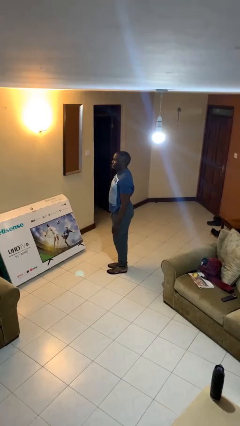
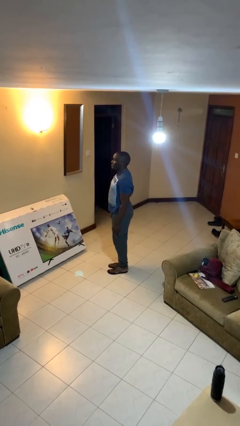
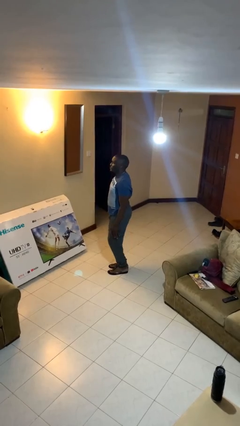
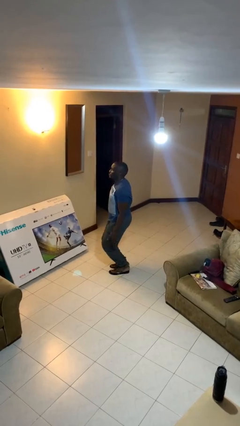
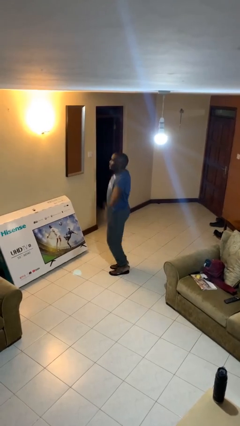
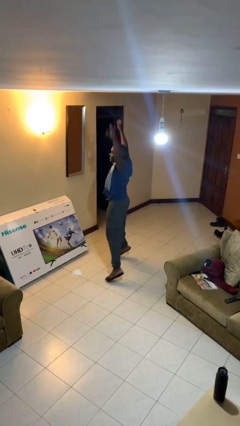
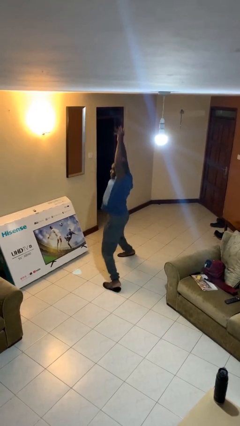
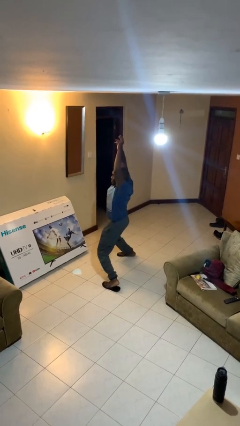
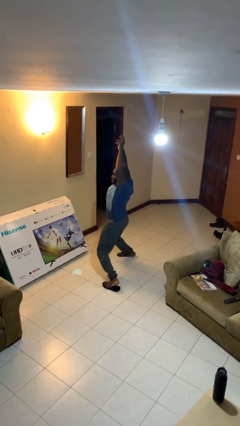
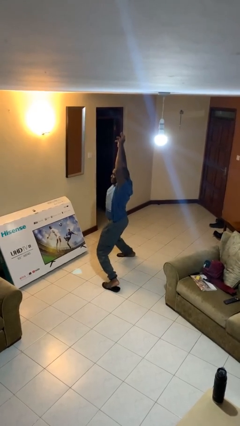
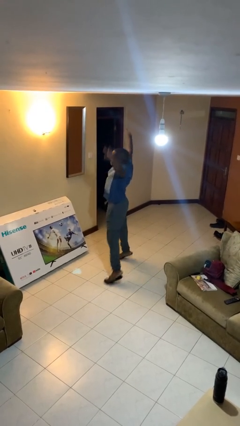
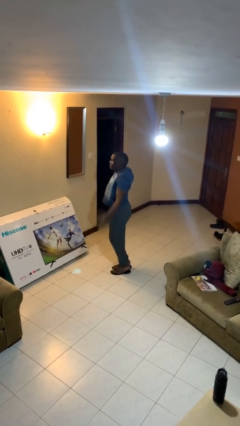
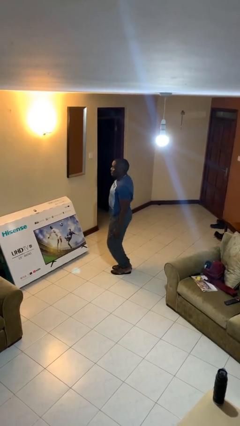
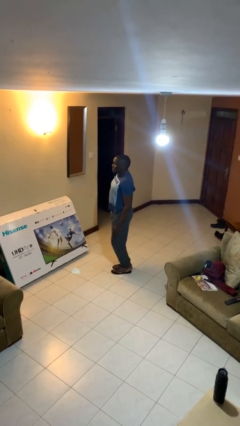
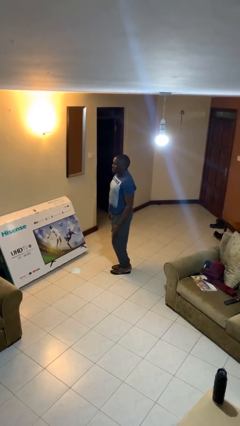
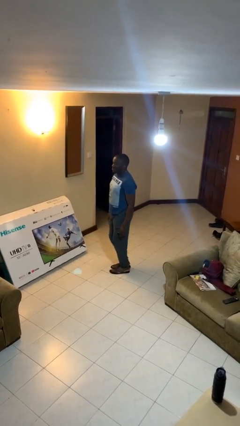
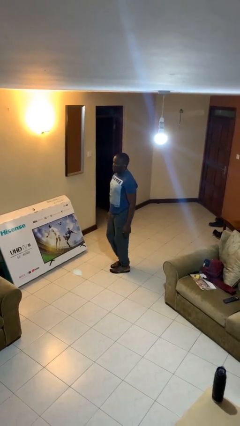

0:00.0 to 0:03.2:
person exercises with jumping jacks

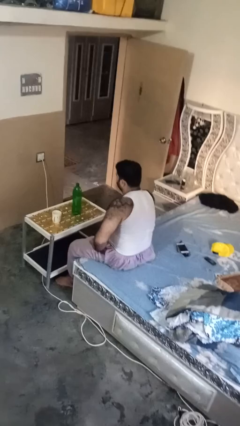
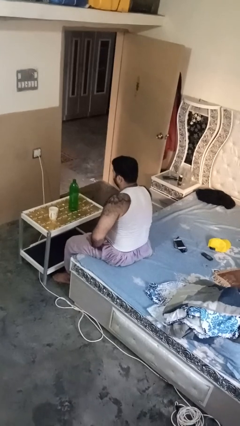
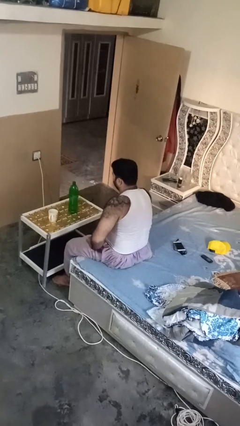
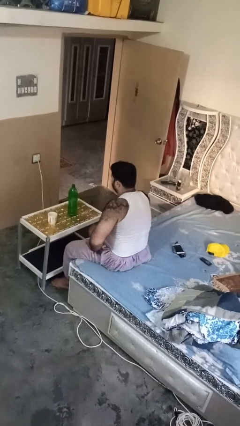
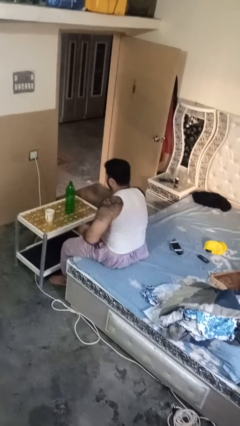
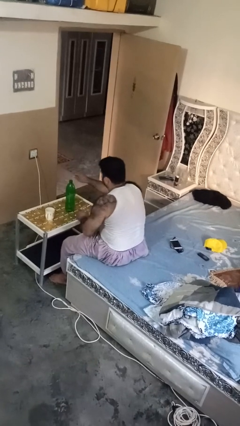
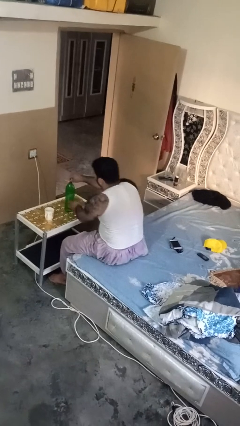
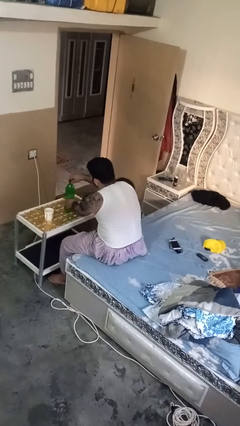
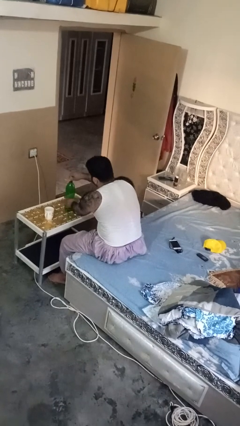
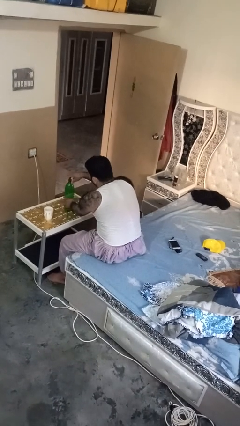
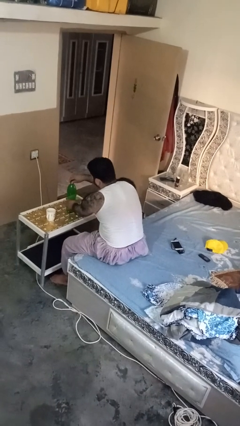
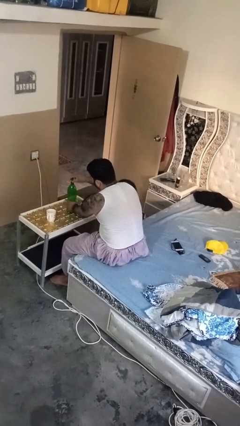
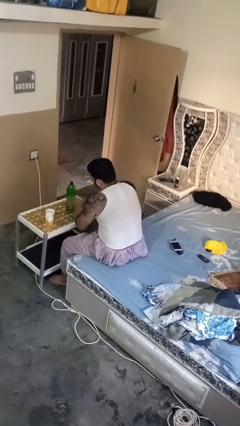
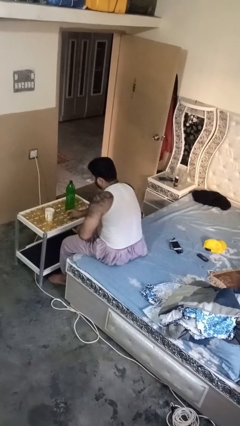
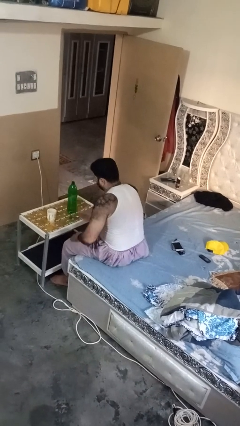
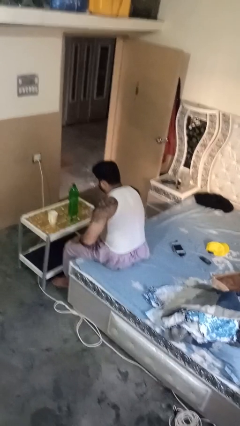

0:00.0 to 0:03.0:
person unscrews lid from bottle

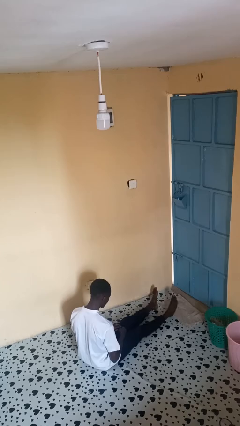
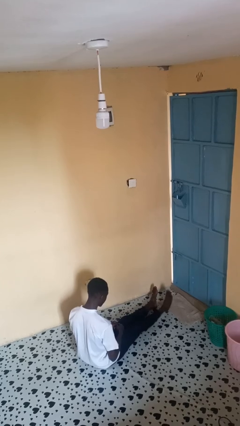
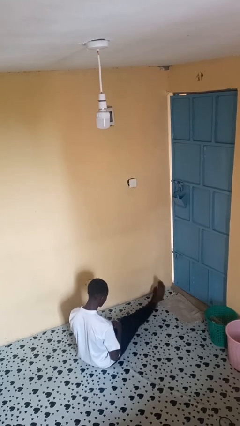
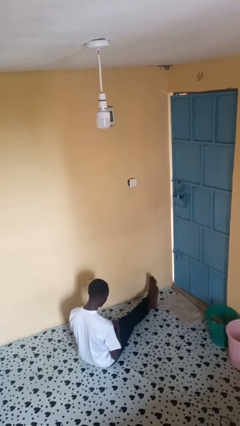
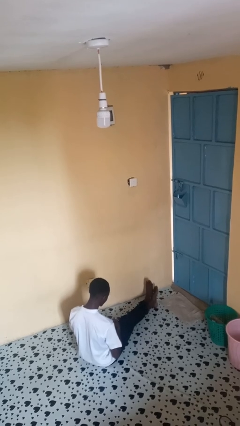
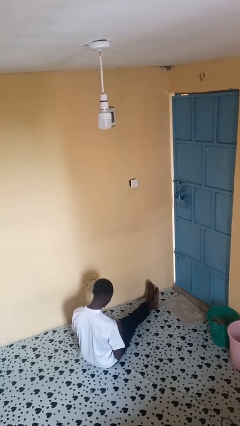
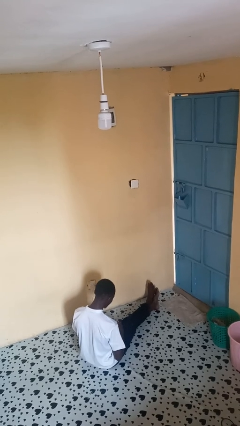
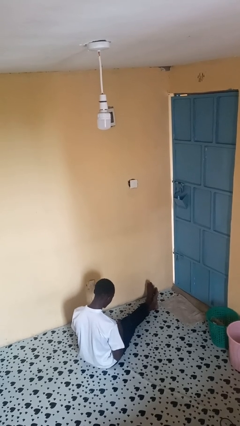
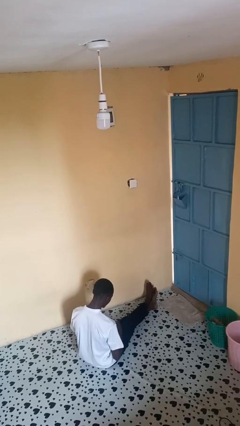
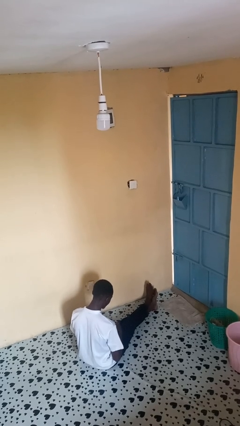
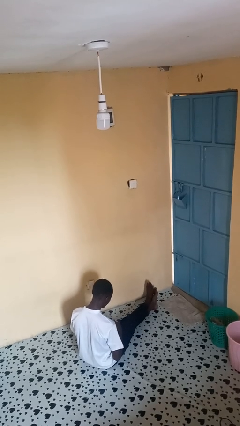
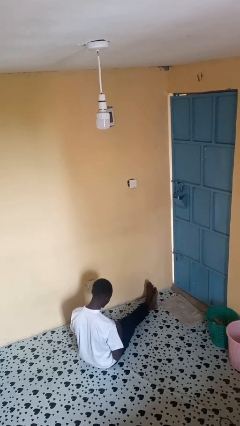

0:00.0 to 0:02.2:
person crosses legs

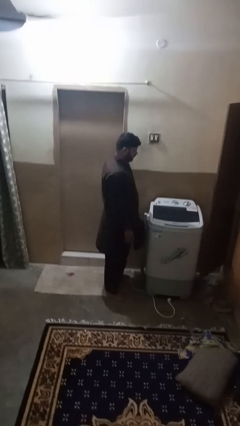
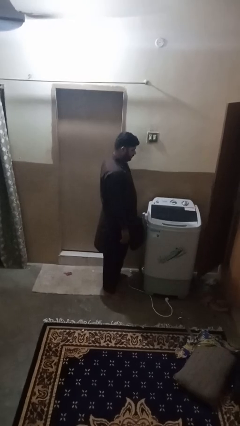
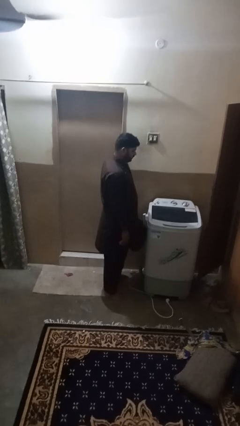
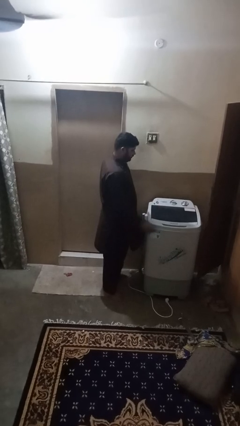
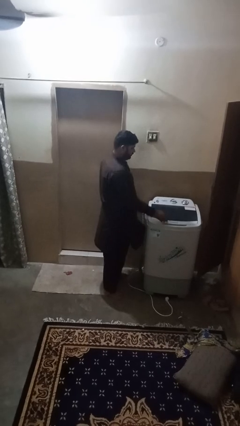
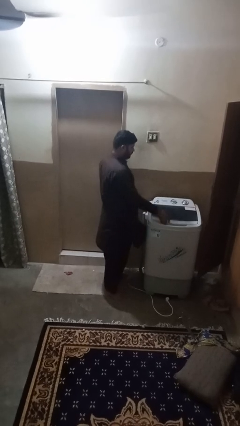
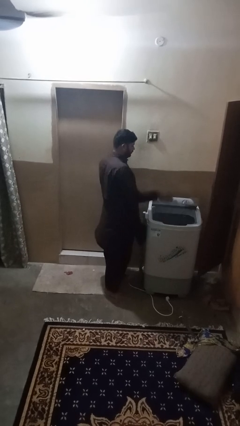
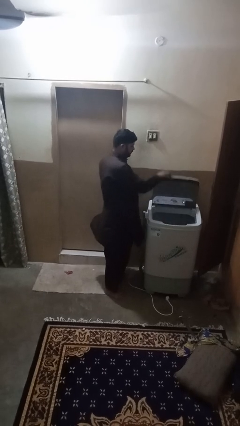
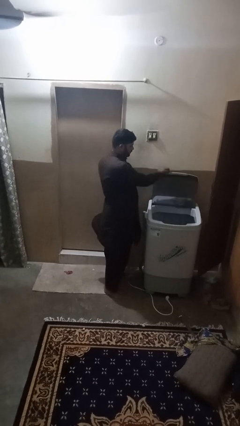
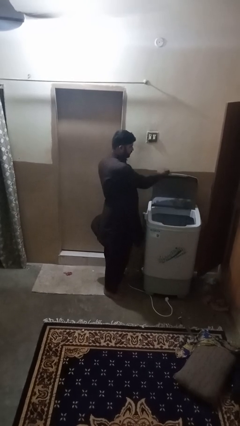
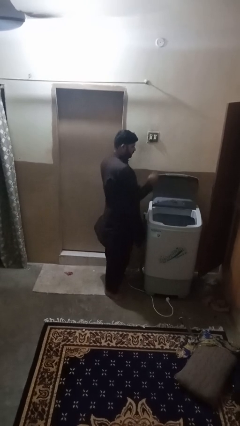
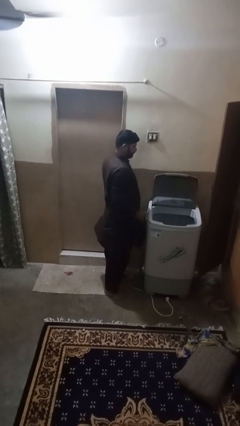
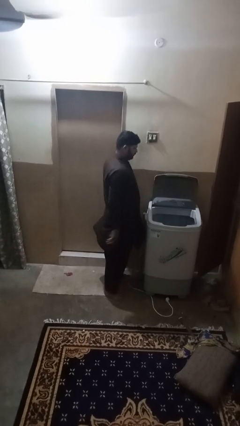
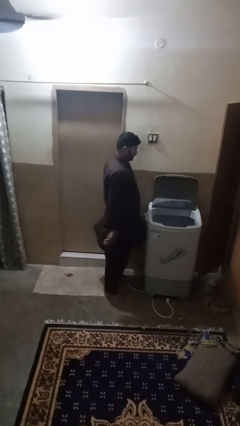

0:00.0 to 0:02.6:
person opens clothes washer

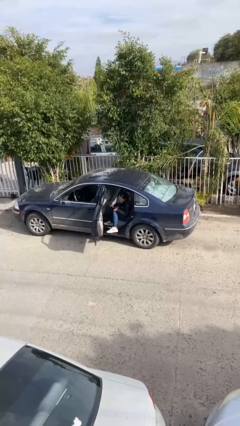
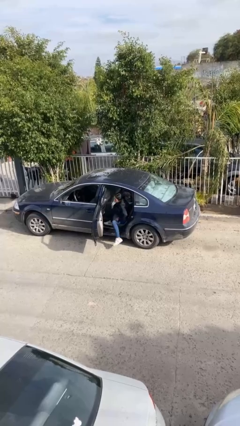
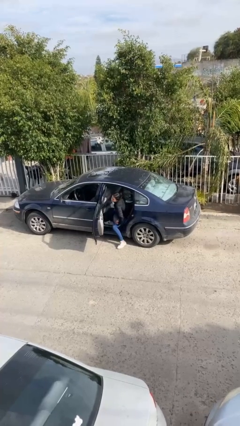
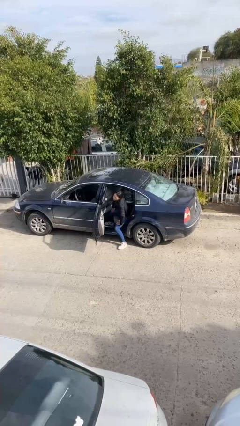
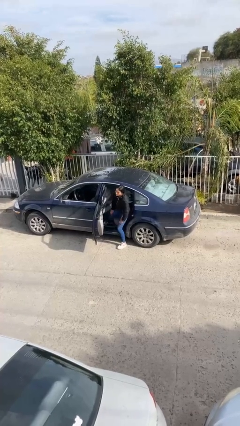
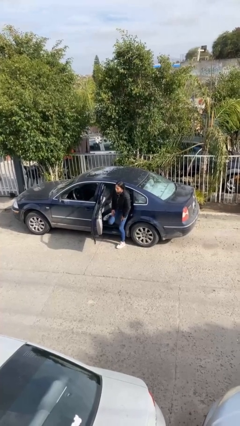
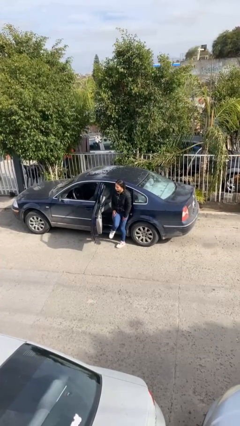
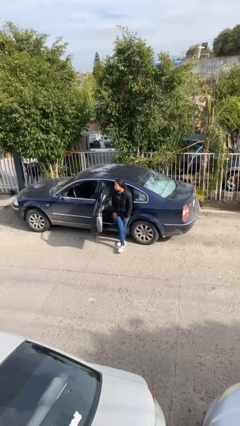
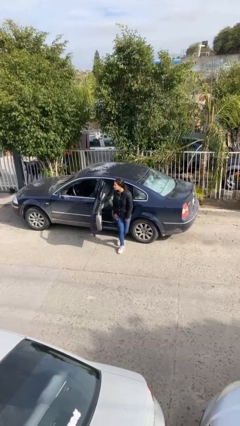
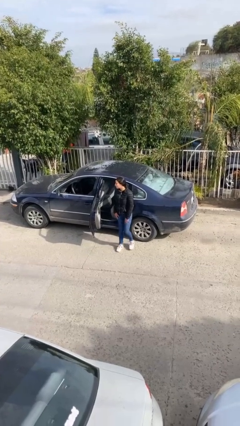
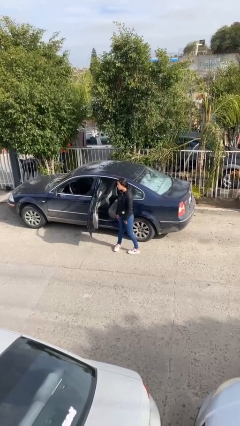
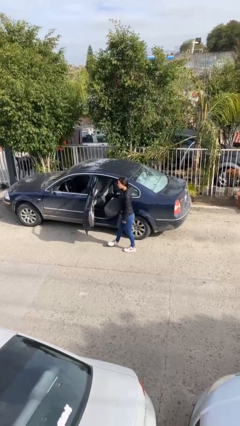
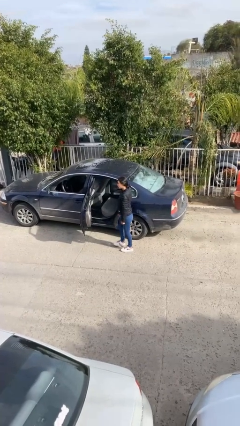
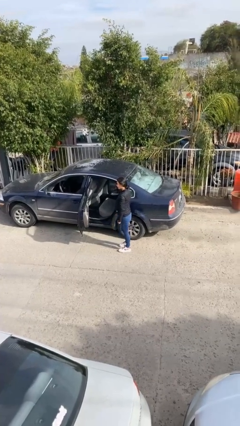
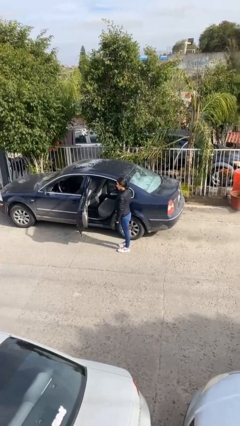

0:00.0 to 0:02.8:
person exits car

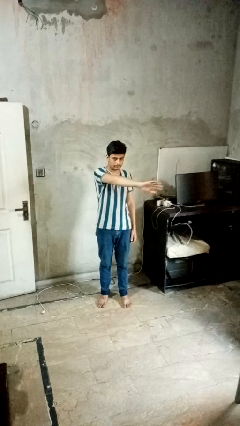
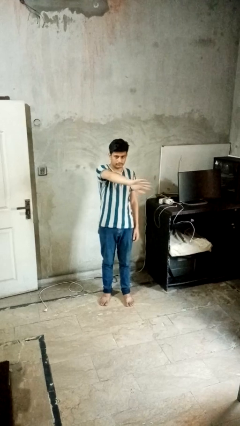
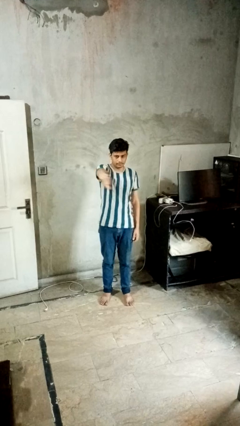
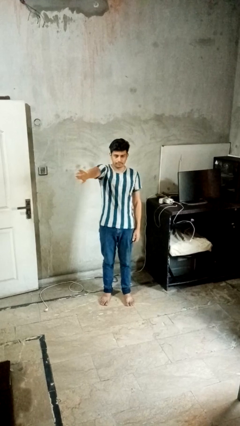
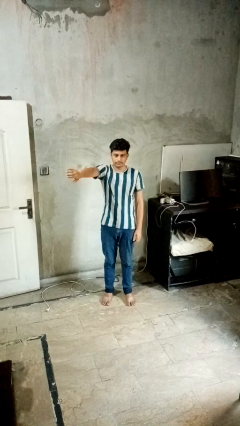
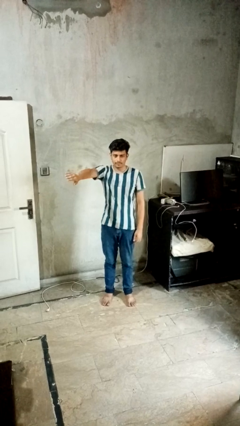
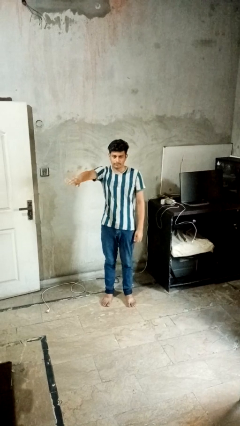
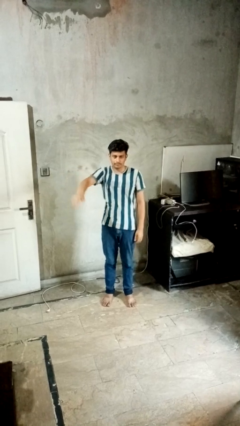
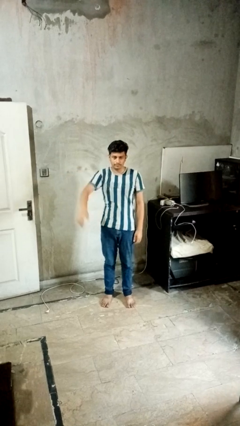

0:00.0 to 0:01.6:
person gestures swipe right

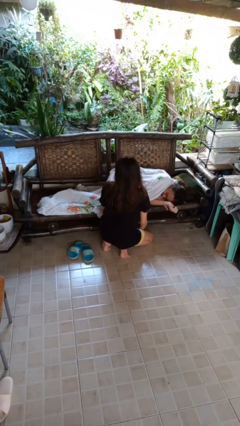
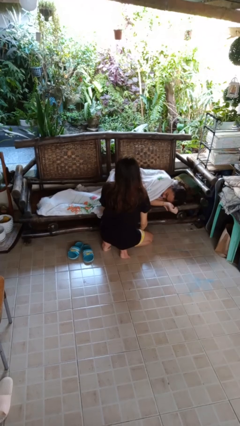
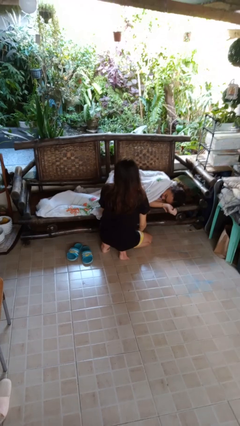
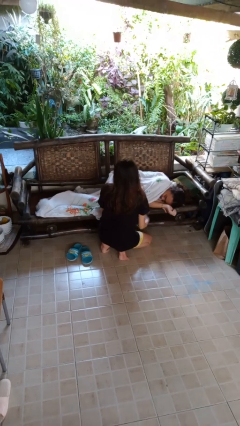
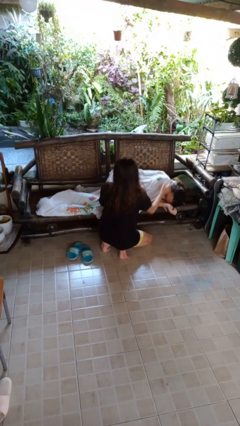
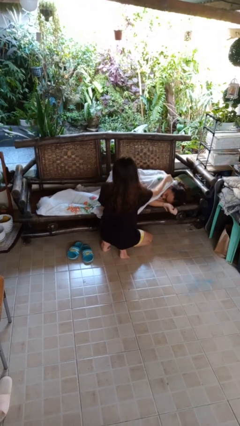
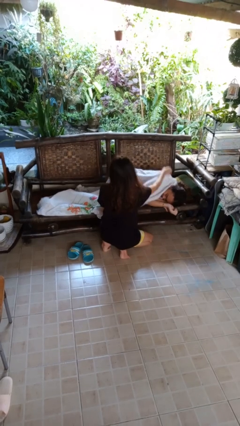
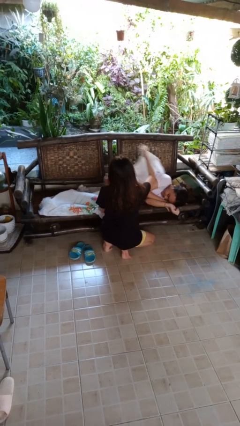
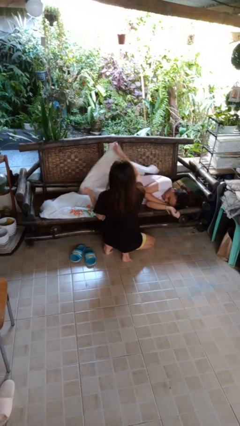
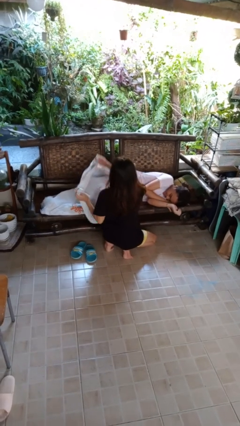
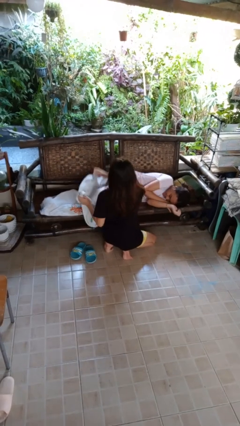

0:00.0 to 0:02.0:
person uncovers friend with blanket
